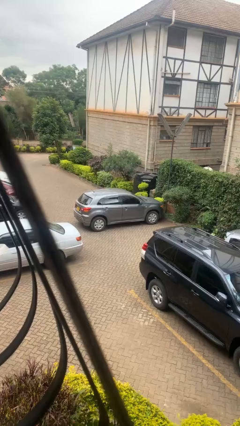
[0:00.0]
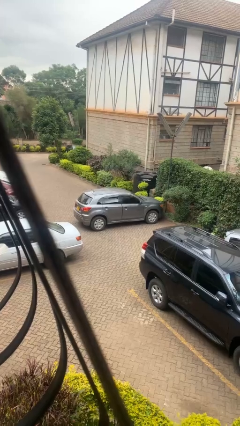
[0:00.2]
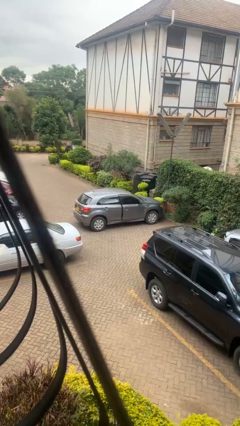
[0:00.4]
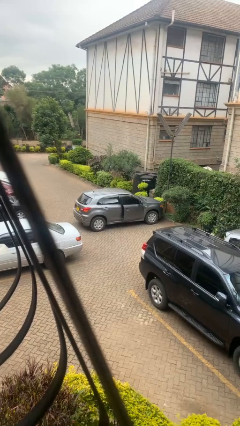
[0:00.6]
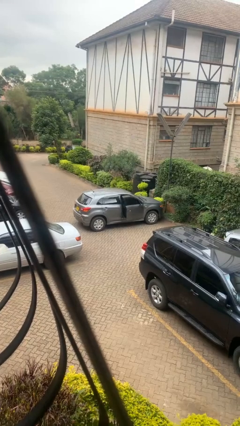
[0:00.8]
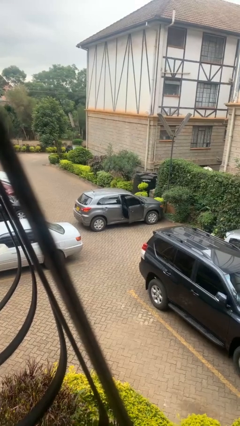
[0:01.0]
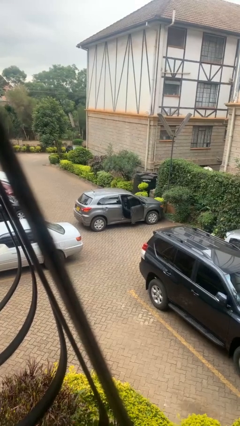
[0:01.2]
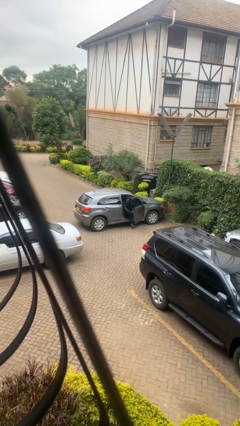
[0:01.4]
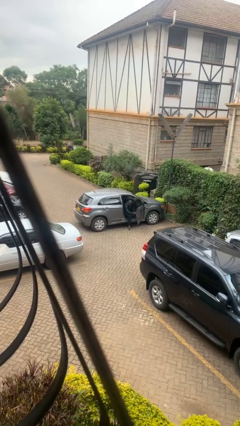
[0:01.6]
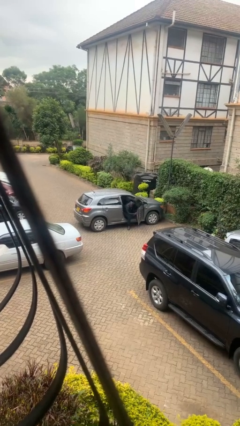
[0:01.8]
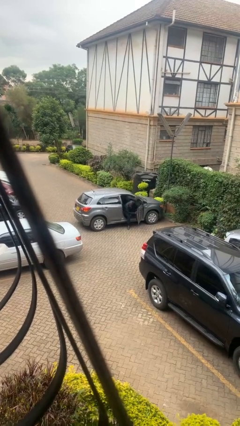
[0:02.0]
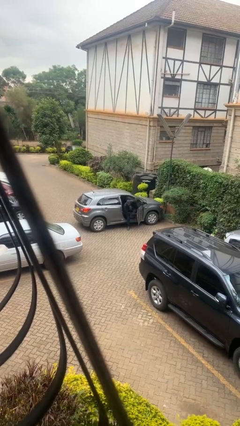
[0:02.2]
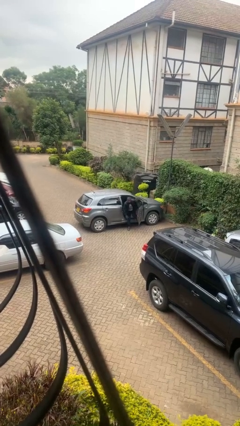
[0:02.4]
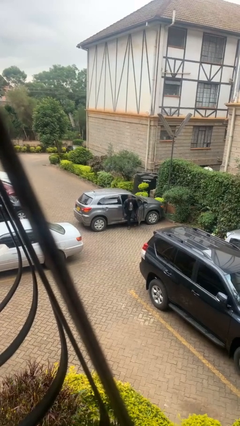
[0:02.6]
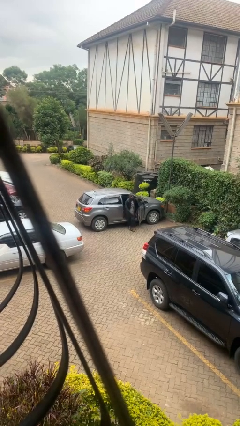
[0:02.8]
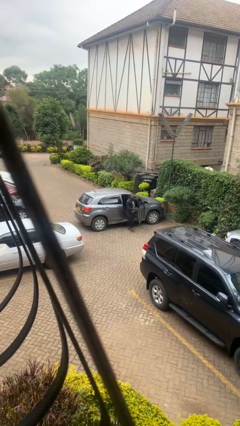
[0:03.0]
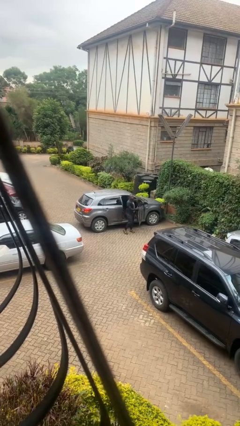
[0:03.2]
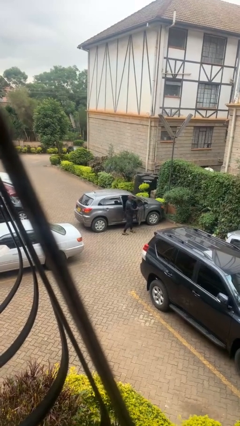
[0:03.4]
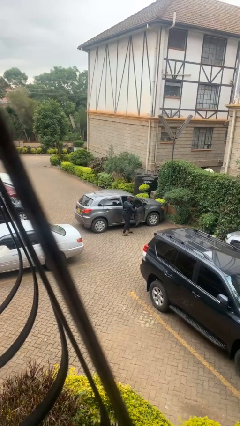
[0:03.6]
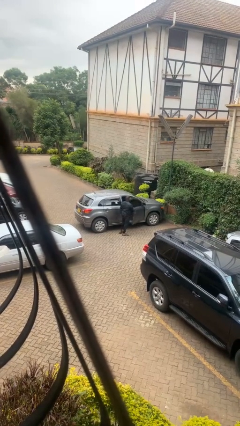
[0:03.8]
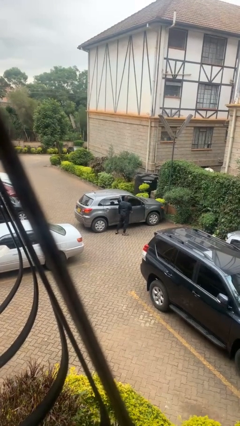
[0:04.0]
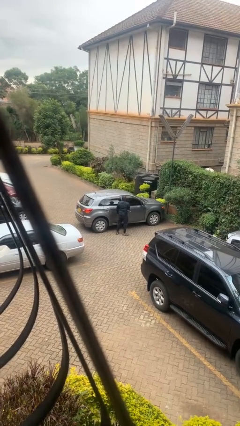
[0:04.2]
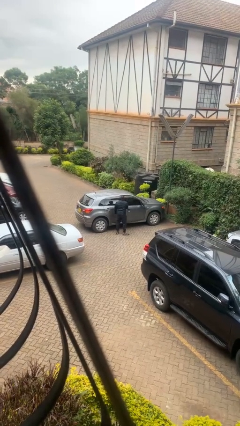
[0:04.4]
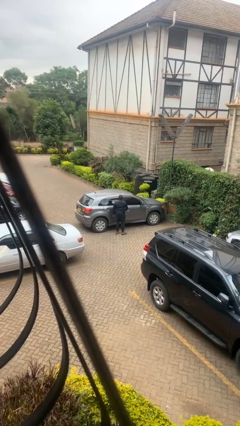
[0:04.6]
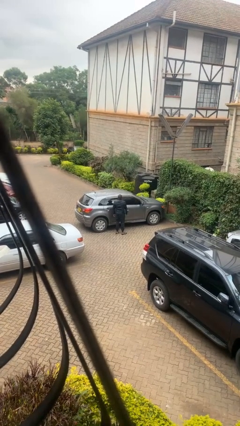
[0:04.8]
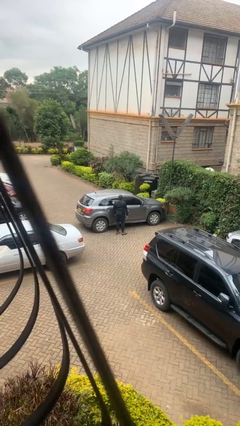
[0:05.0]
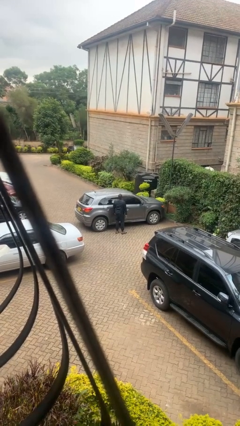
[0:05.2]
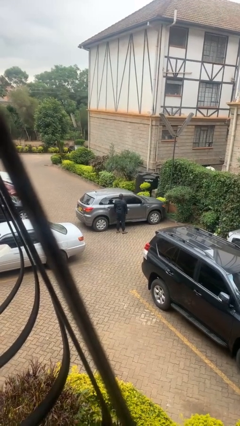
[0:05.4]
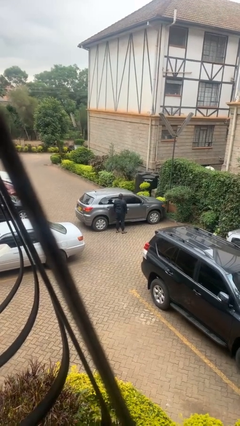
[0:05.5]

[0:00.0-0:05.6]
car drops off person

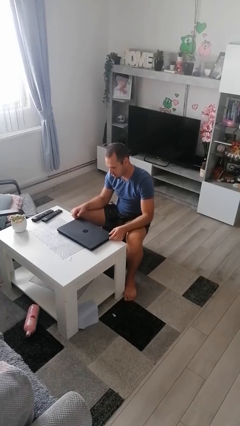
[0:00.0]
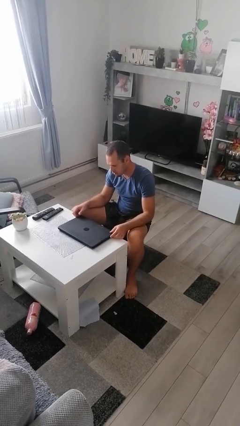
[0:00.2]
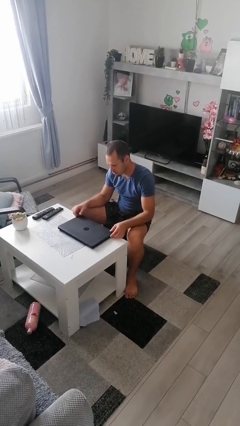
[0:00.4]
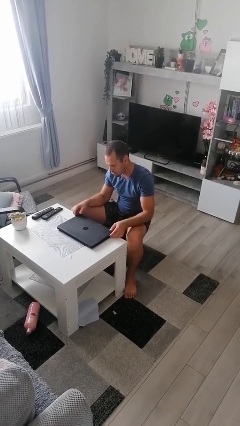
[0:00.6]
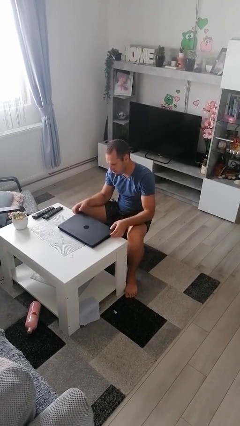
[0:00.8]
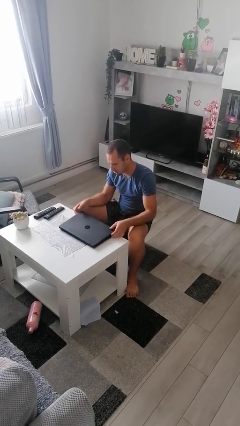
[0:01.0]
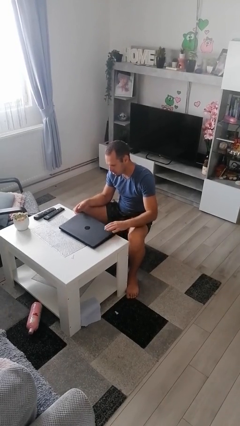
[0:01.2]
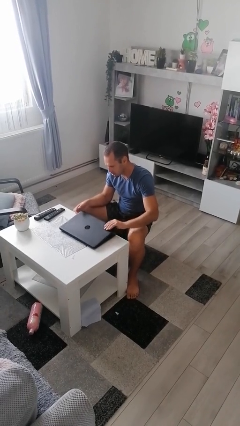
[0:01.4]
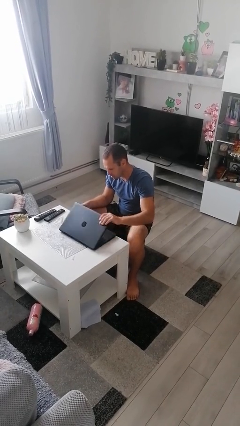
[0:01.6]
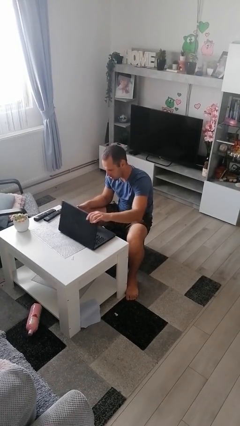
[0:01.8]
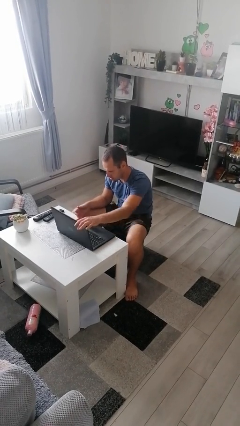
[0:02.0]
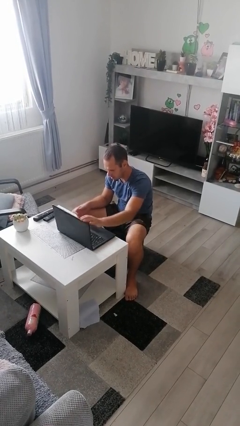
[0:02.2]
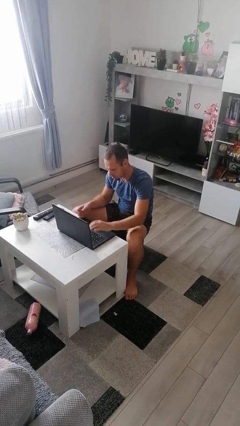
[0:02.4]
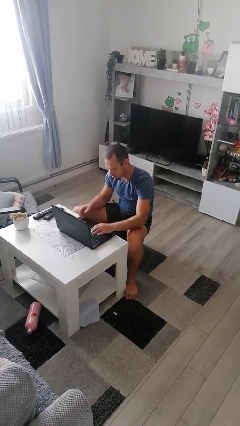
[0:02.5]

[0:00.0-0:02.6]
person opens laptop

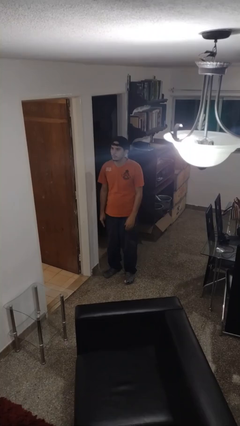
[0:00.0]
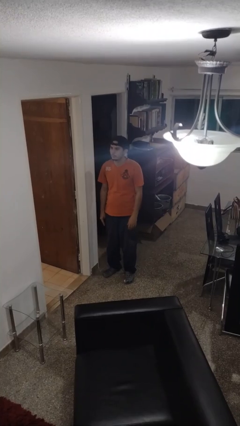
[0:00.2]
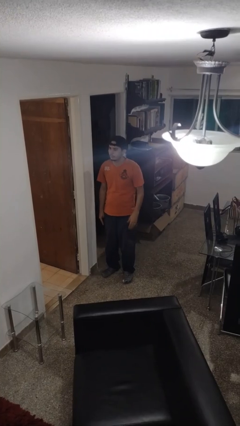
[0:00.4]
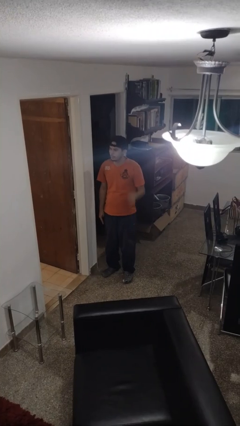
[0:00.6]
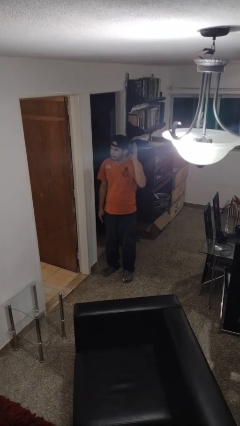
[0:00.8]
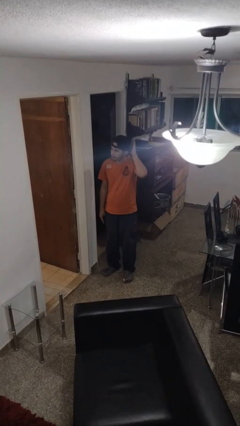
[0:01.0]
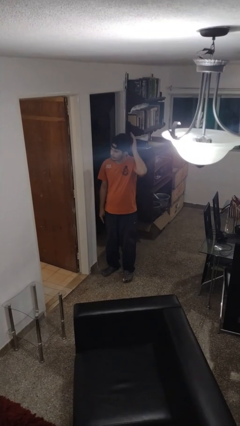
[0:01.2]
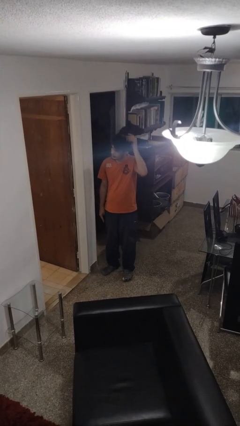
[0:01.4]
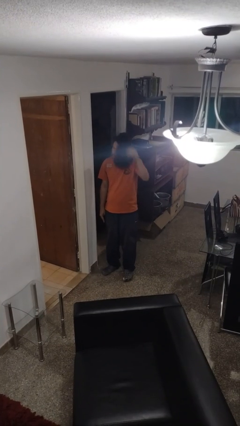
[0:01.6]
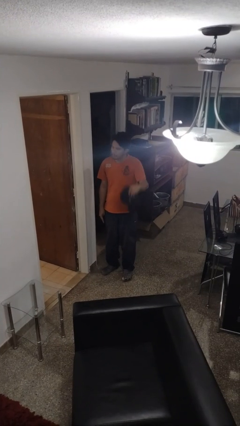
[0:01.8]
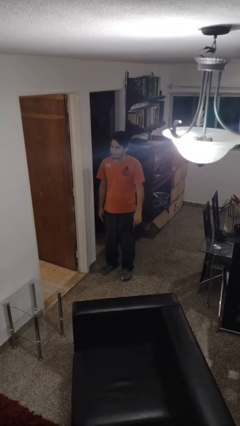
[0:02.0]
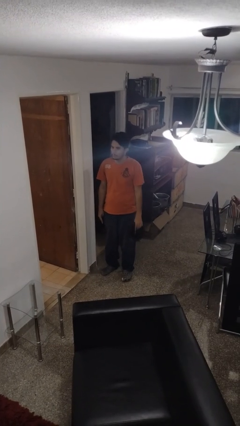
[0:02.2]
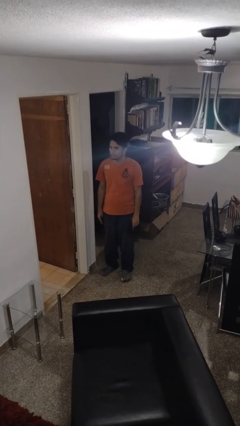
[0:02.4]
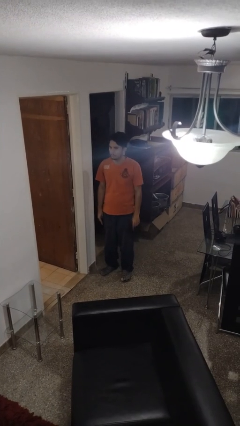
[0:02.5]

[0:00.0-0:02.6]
person takes off hat

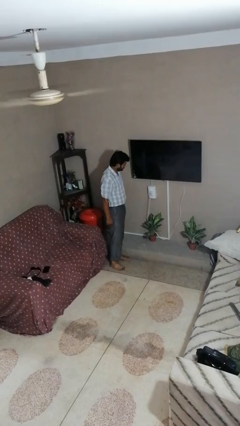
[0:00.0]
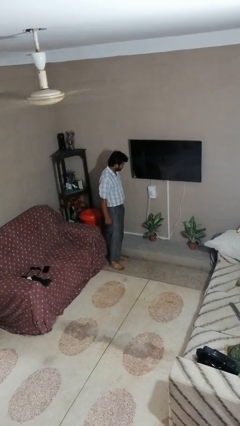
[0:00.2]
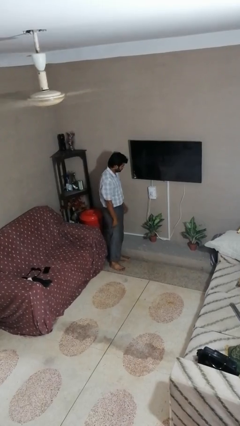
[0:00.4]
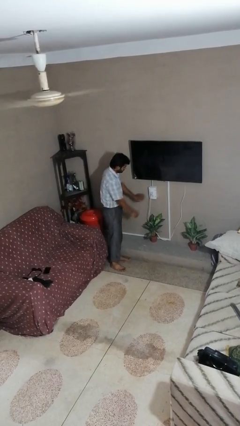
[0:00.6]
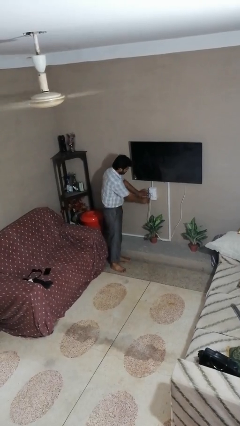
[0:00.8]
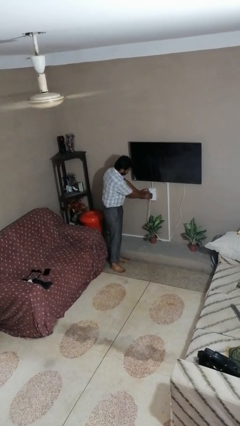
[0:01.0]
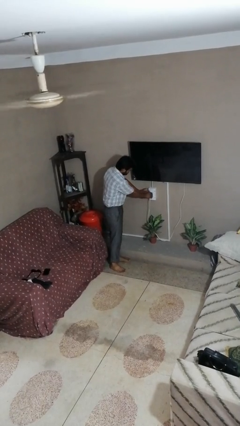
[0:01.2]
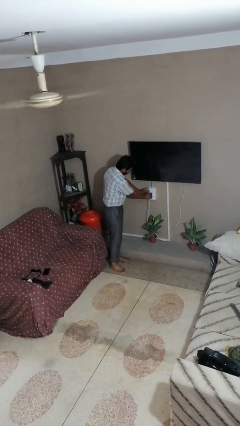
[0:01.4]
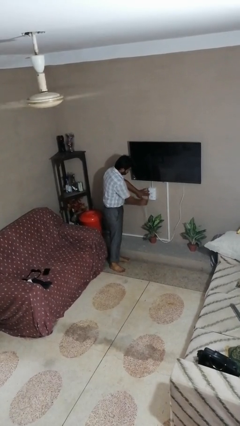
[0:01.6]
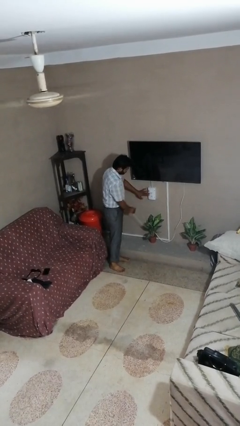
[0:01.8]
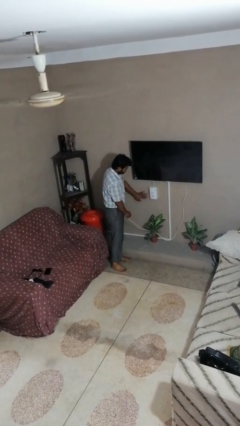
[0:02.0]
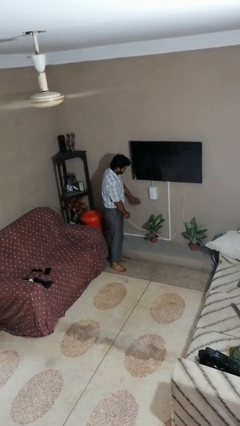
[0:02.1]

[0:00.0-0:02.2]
person unplugs from electrical socket

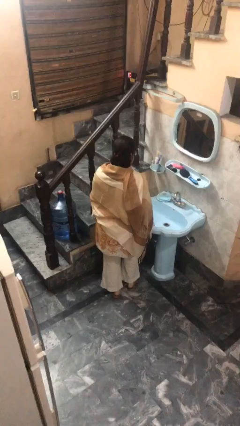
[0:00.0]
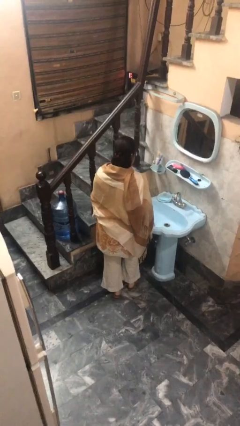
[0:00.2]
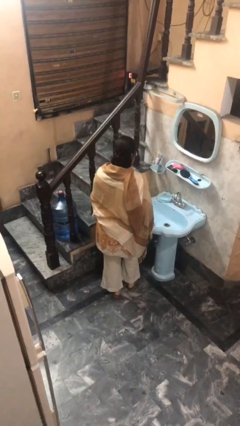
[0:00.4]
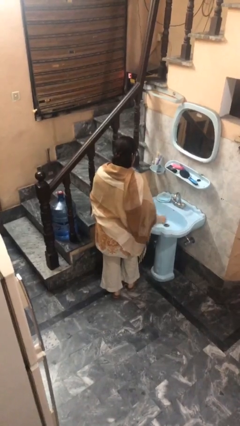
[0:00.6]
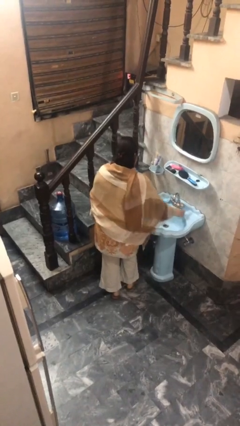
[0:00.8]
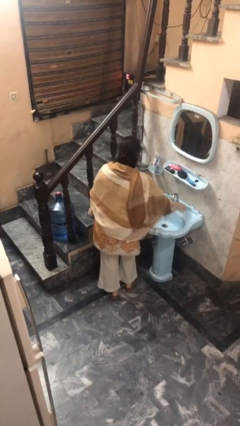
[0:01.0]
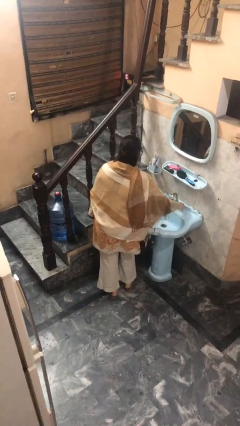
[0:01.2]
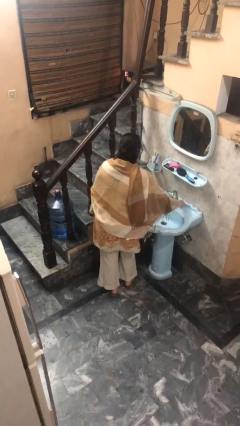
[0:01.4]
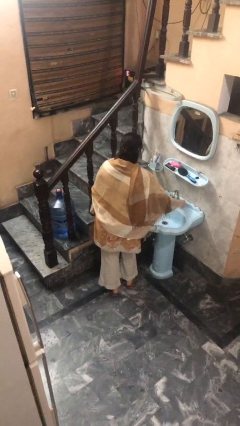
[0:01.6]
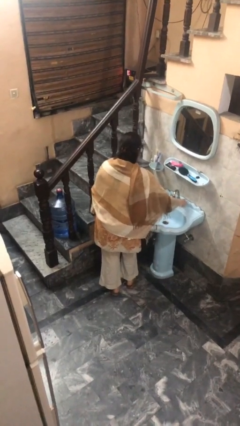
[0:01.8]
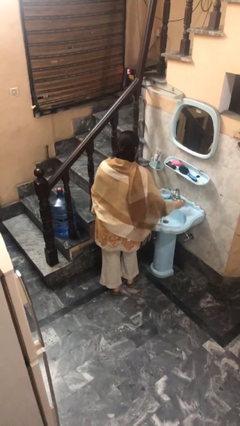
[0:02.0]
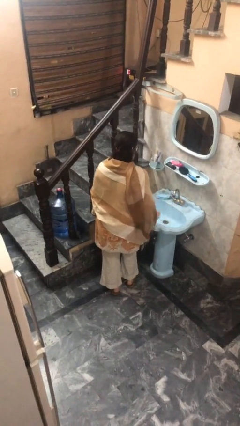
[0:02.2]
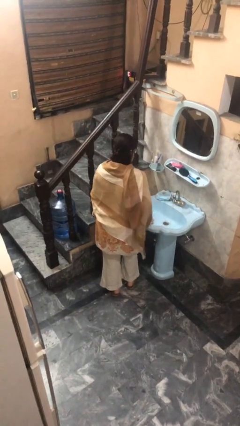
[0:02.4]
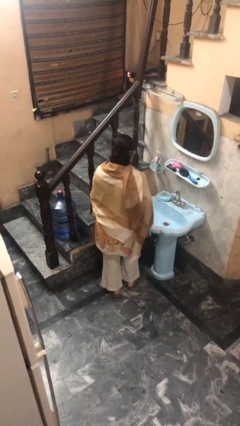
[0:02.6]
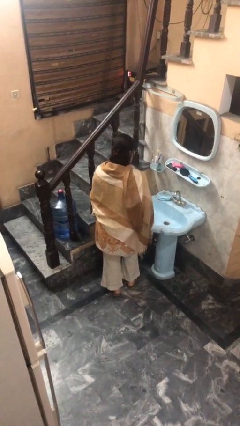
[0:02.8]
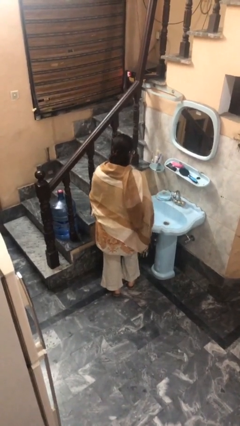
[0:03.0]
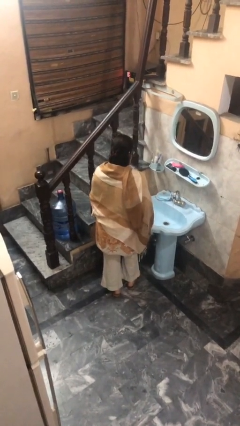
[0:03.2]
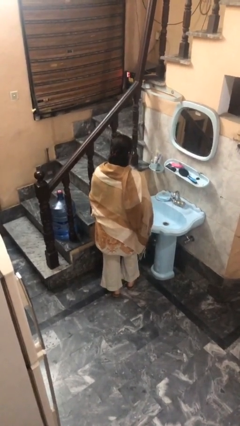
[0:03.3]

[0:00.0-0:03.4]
person turns on faucet

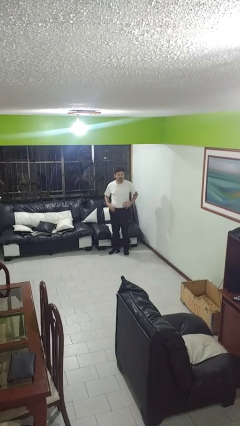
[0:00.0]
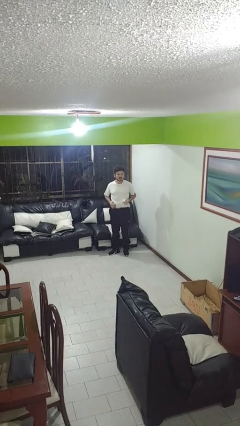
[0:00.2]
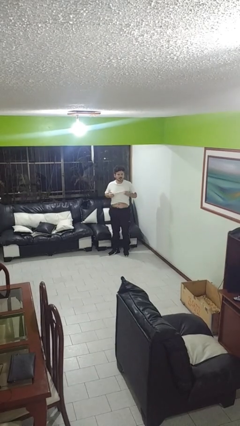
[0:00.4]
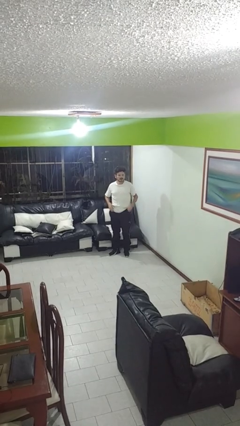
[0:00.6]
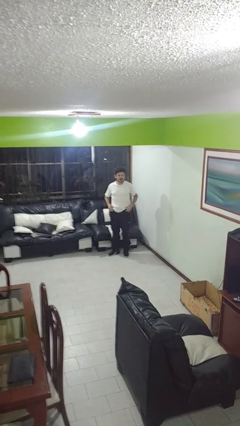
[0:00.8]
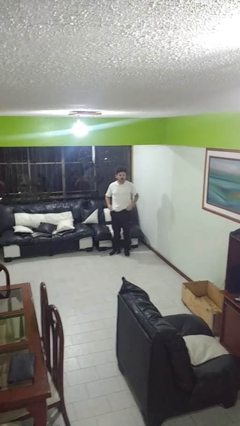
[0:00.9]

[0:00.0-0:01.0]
person untucks shirt
